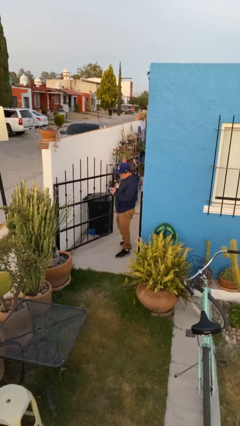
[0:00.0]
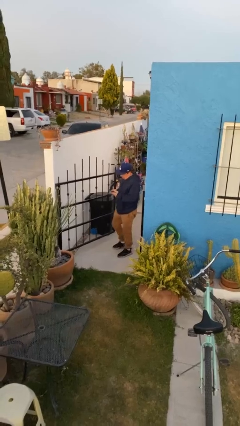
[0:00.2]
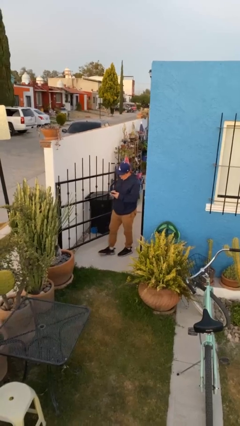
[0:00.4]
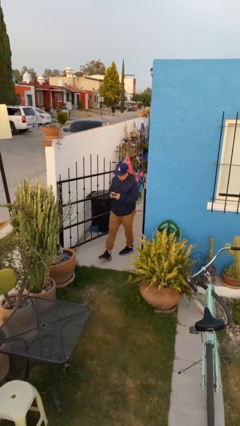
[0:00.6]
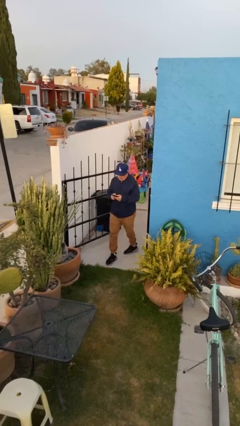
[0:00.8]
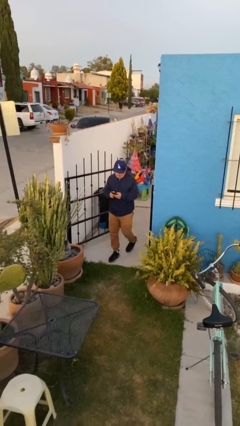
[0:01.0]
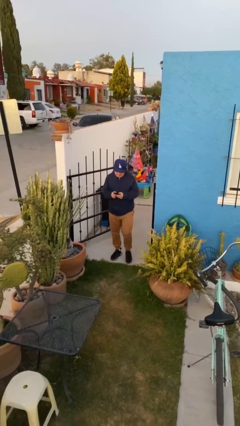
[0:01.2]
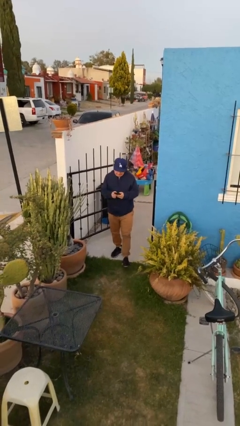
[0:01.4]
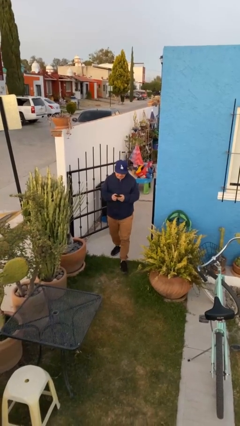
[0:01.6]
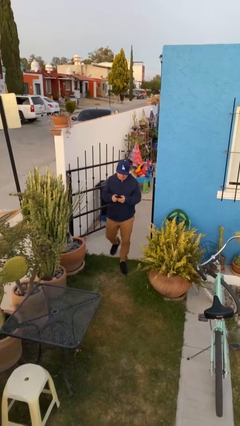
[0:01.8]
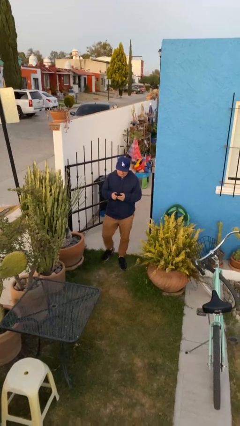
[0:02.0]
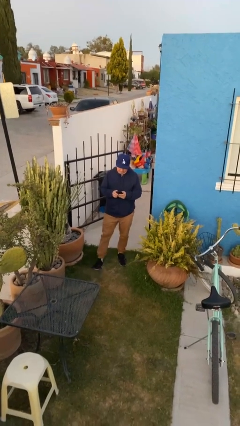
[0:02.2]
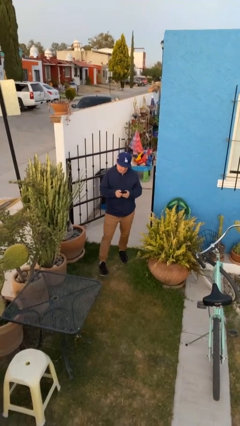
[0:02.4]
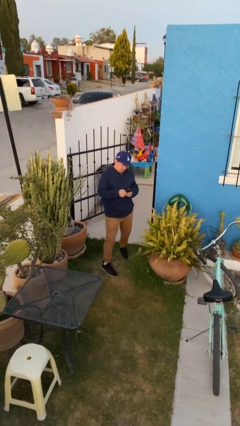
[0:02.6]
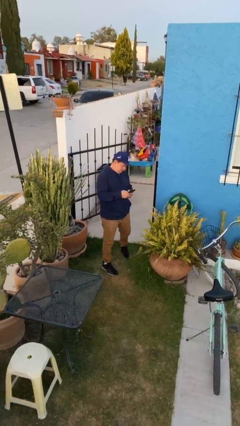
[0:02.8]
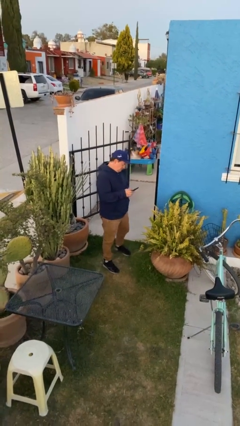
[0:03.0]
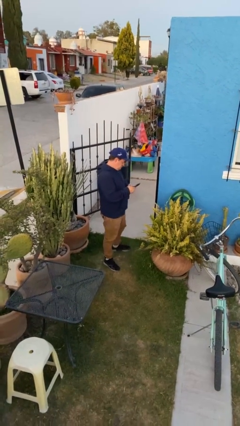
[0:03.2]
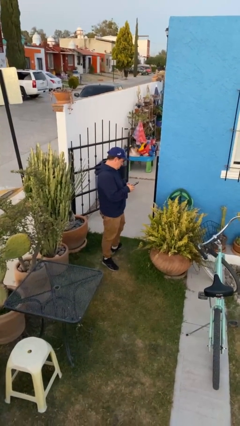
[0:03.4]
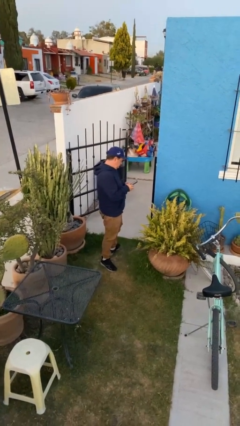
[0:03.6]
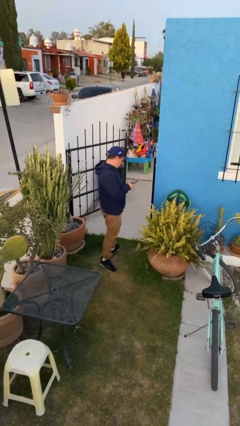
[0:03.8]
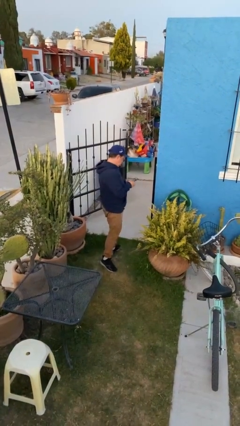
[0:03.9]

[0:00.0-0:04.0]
person enters scene through structure

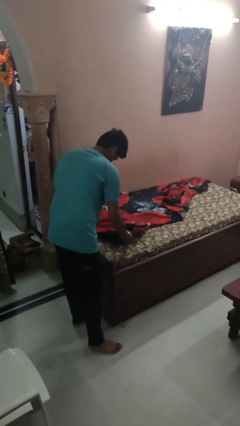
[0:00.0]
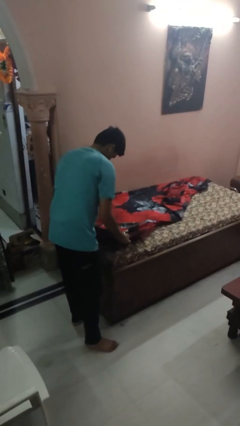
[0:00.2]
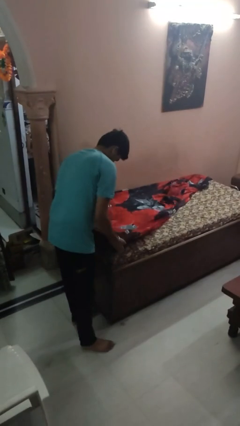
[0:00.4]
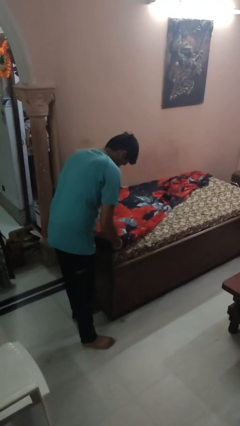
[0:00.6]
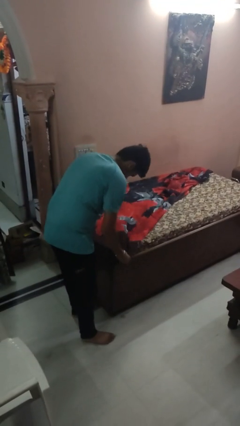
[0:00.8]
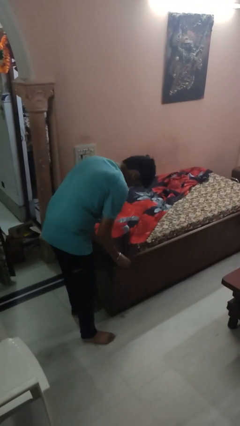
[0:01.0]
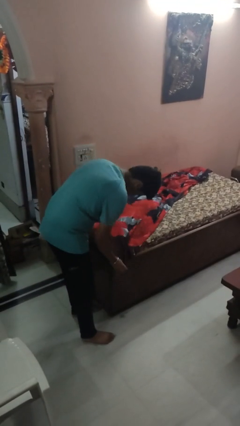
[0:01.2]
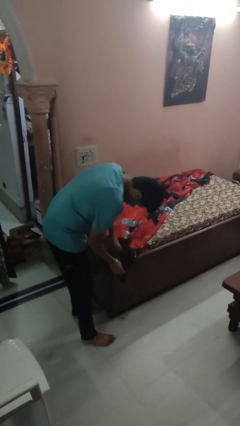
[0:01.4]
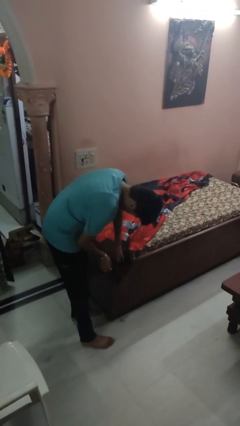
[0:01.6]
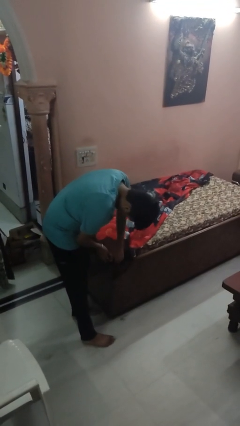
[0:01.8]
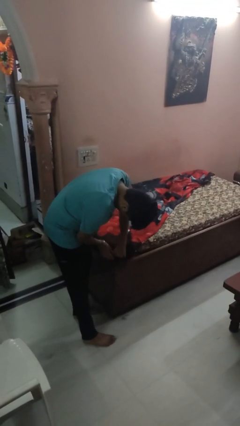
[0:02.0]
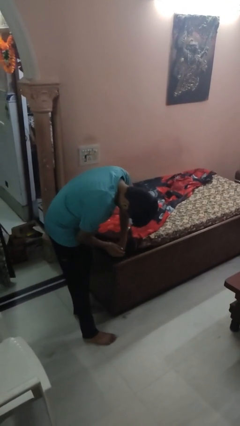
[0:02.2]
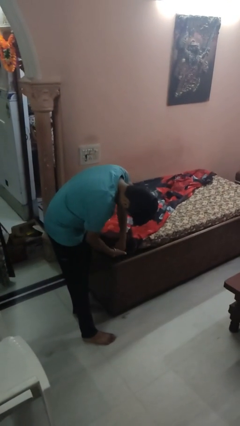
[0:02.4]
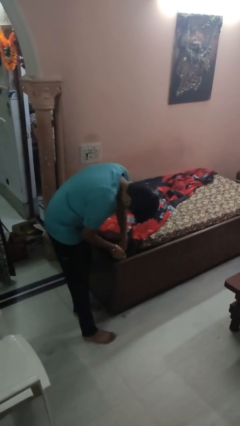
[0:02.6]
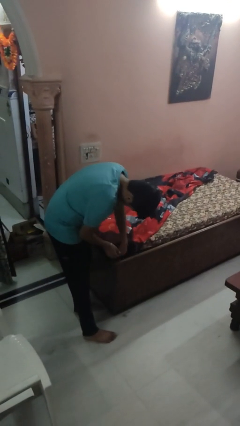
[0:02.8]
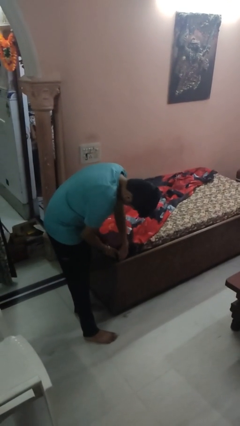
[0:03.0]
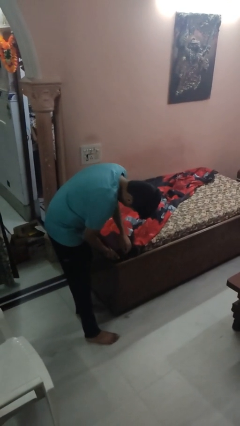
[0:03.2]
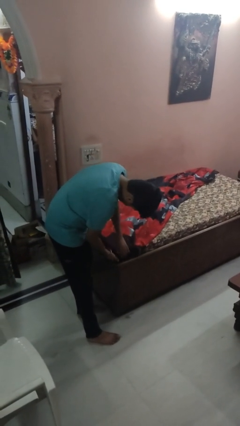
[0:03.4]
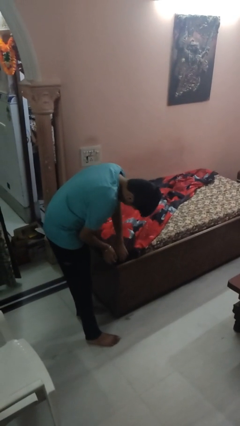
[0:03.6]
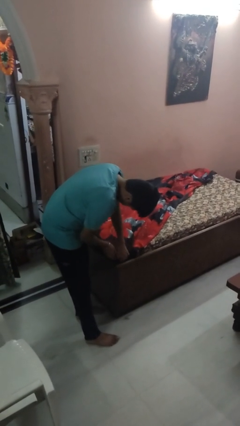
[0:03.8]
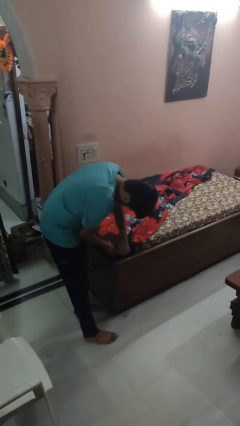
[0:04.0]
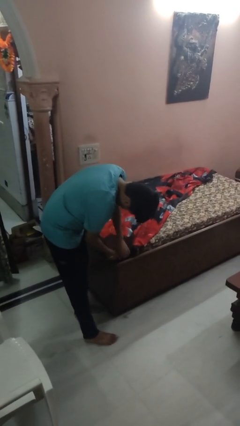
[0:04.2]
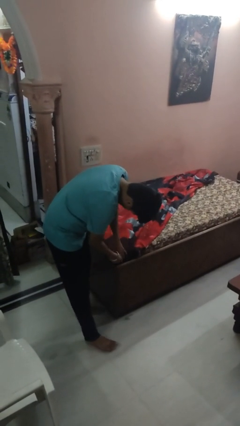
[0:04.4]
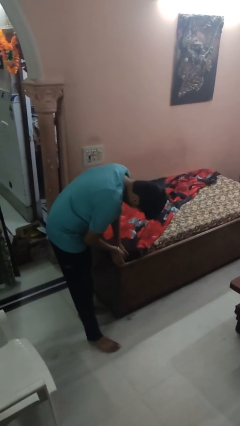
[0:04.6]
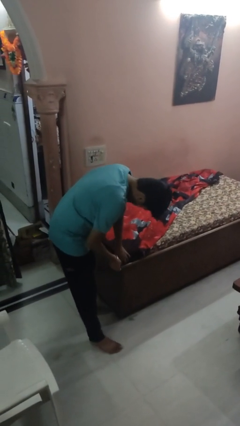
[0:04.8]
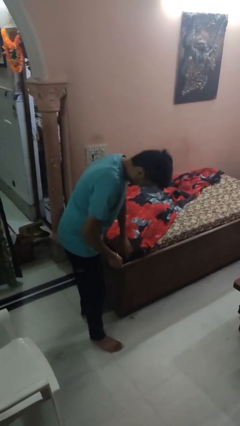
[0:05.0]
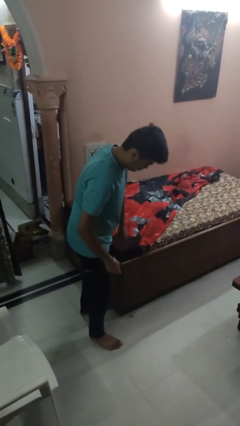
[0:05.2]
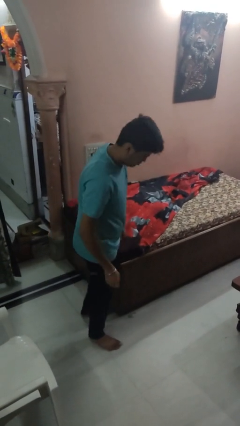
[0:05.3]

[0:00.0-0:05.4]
person makes bed

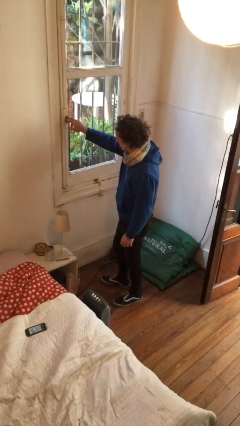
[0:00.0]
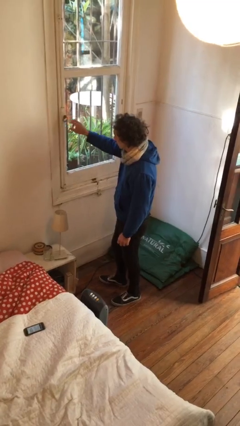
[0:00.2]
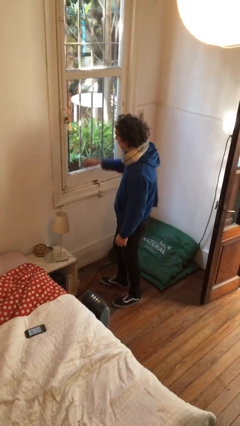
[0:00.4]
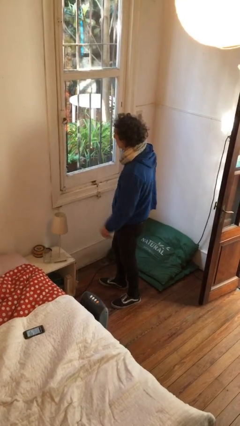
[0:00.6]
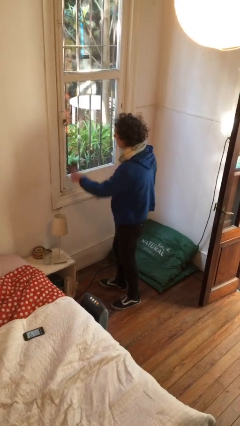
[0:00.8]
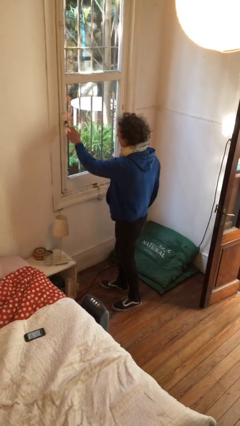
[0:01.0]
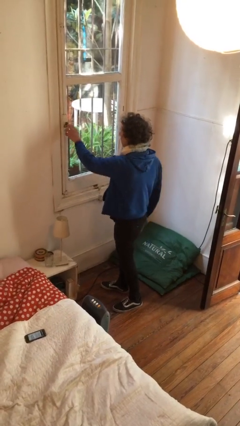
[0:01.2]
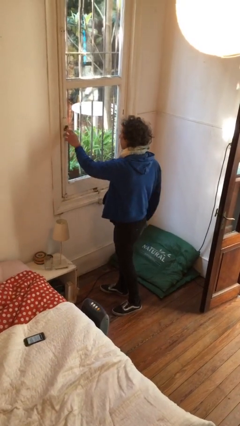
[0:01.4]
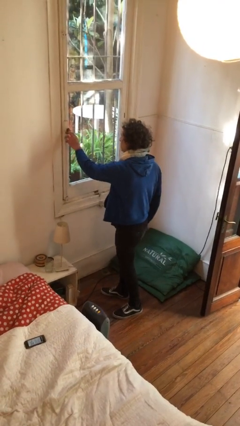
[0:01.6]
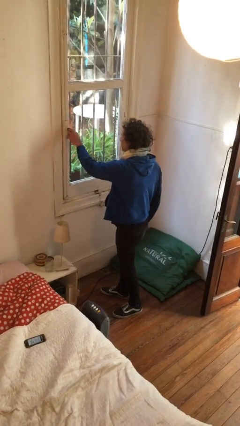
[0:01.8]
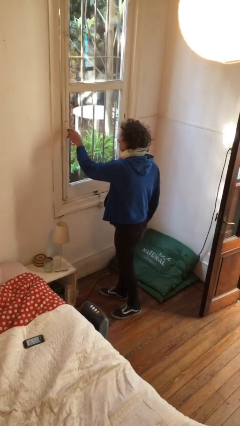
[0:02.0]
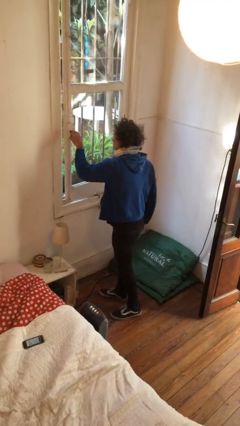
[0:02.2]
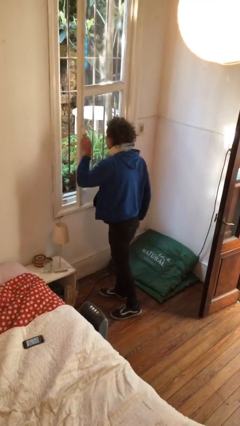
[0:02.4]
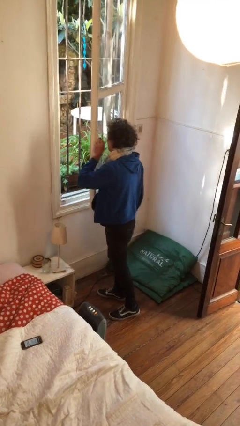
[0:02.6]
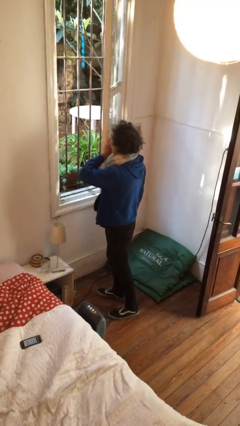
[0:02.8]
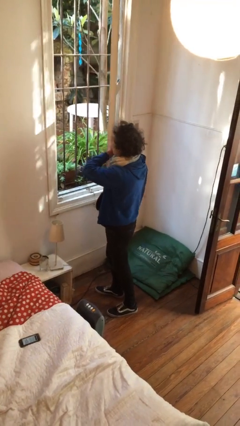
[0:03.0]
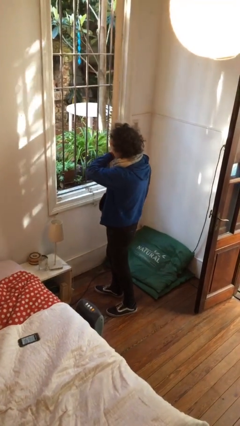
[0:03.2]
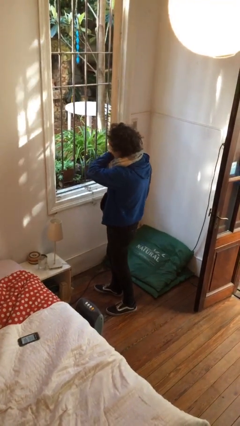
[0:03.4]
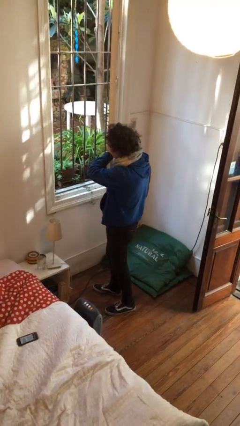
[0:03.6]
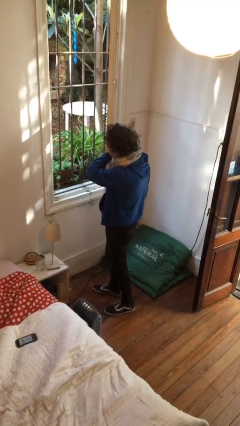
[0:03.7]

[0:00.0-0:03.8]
person opens home window

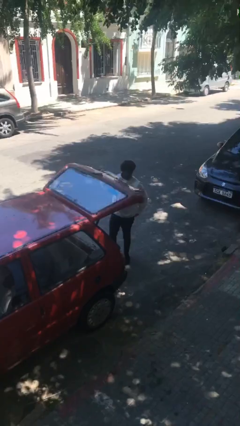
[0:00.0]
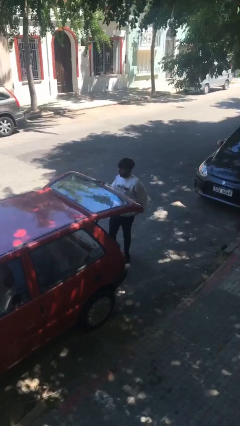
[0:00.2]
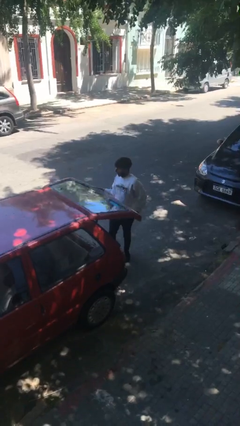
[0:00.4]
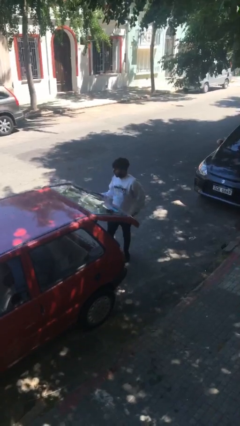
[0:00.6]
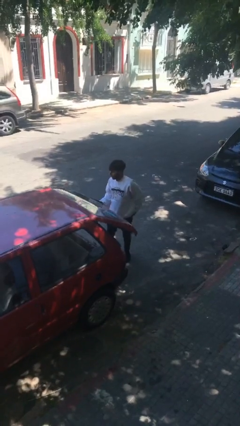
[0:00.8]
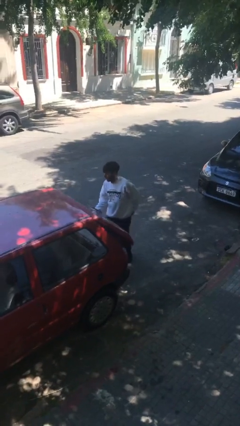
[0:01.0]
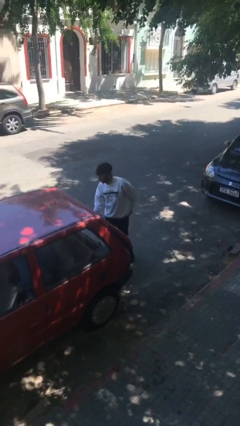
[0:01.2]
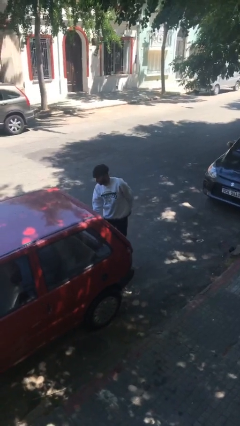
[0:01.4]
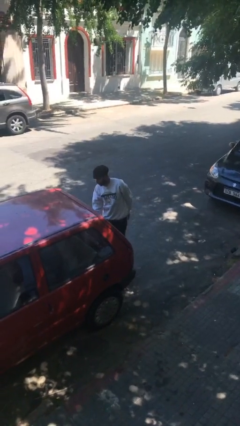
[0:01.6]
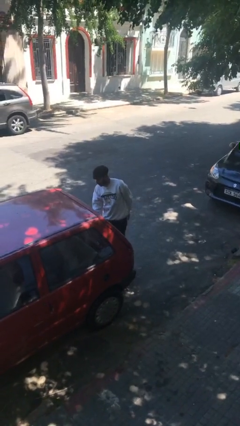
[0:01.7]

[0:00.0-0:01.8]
person closes car trunk

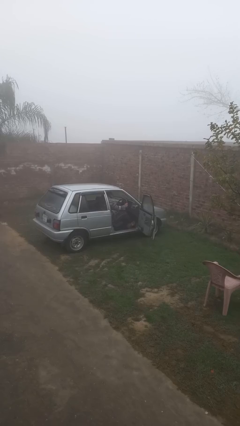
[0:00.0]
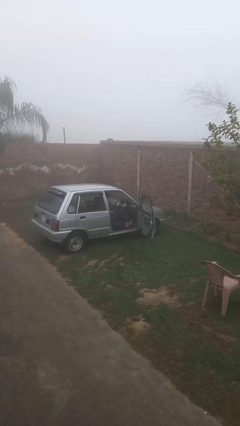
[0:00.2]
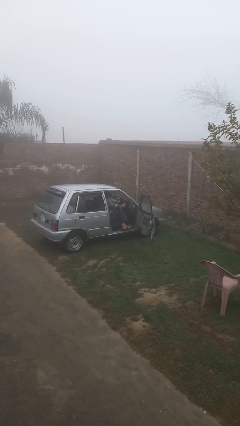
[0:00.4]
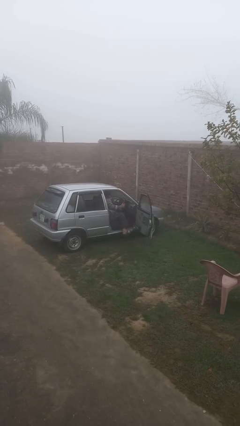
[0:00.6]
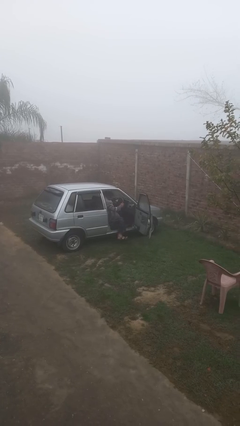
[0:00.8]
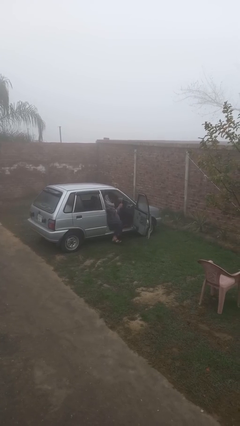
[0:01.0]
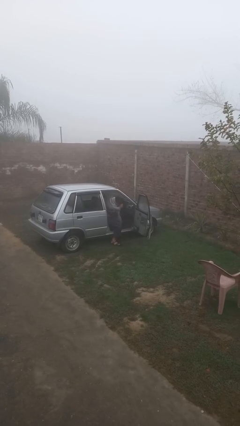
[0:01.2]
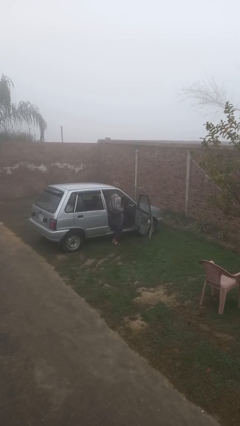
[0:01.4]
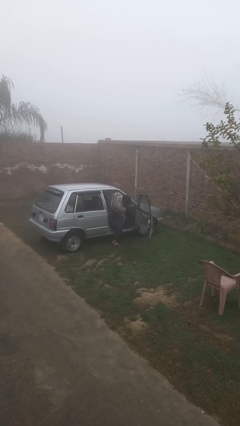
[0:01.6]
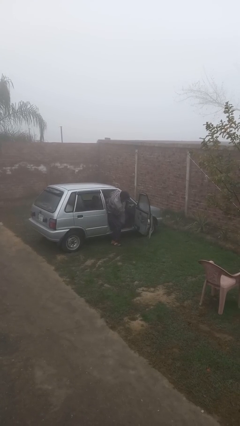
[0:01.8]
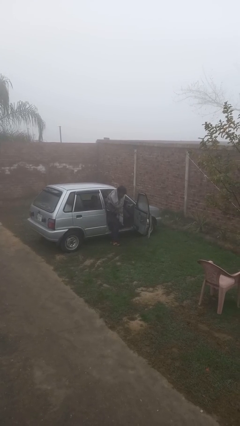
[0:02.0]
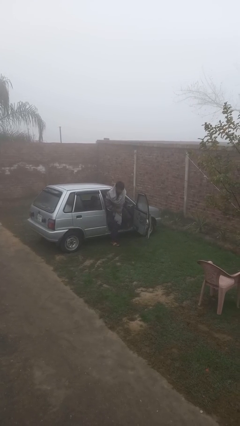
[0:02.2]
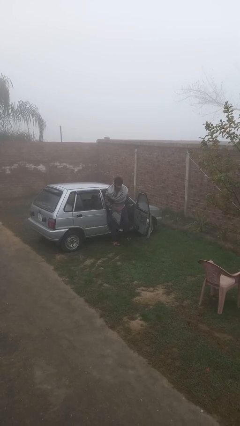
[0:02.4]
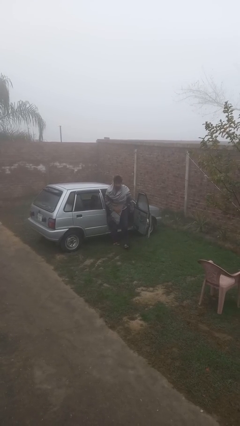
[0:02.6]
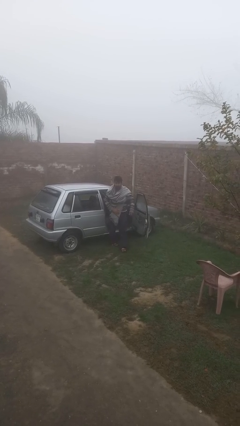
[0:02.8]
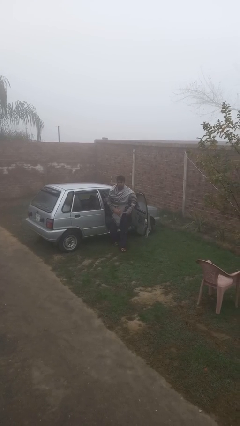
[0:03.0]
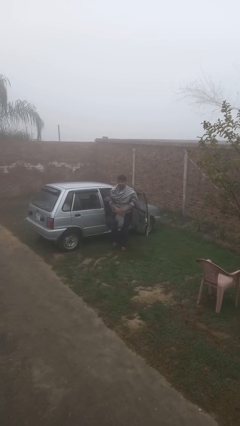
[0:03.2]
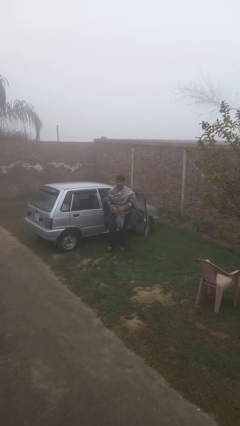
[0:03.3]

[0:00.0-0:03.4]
person exits car
